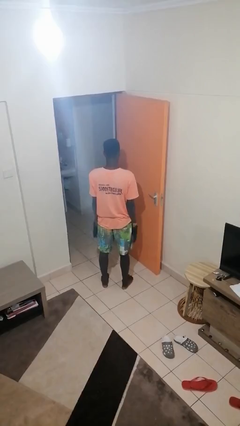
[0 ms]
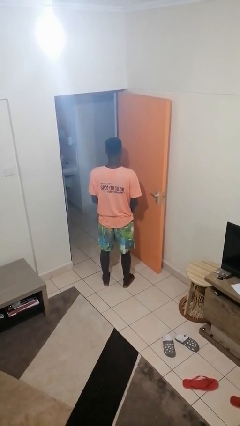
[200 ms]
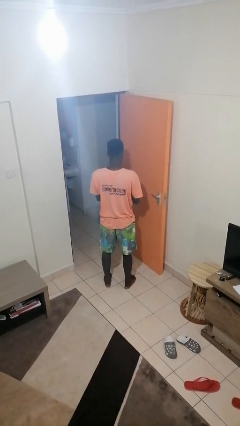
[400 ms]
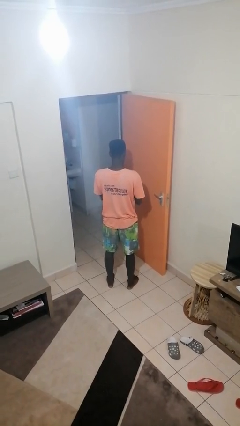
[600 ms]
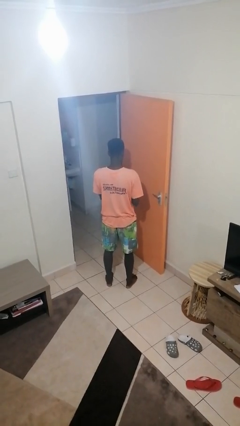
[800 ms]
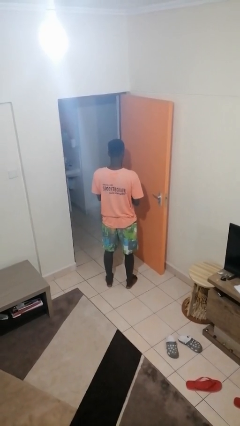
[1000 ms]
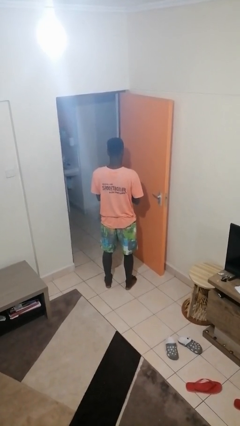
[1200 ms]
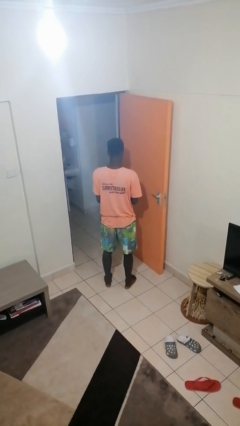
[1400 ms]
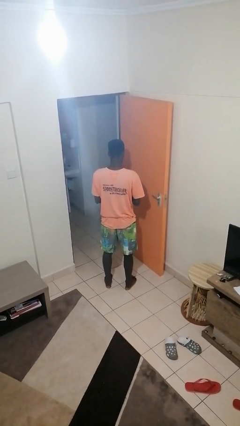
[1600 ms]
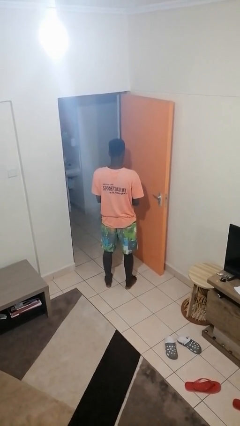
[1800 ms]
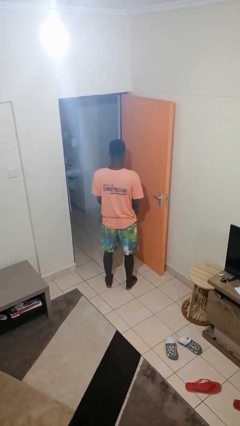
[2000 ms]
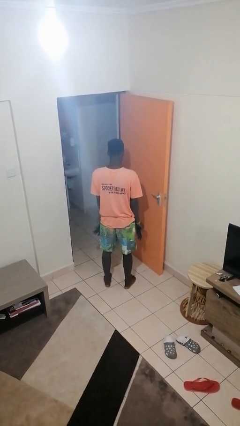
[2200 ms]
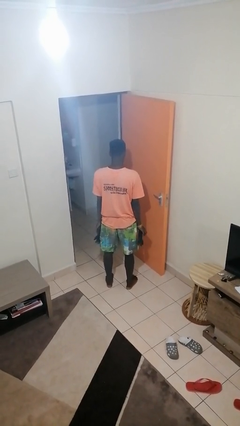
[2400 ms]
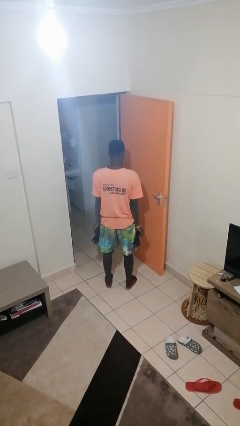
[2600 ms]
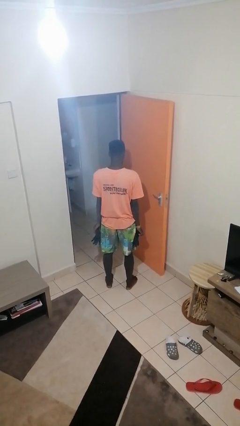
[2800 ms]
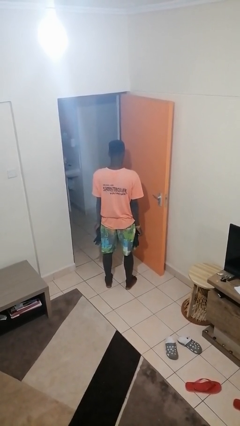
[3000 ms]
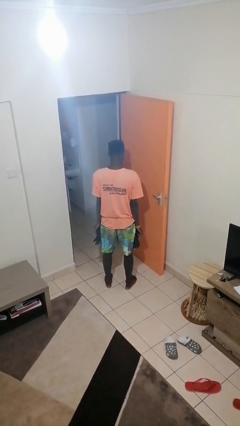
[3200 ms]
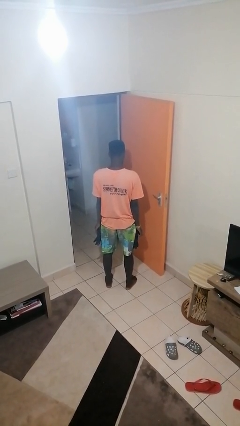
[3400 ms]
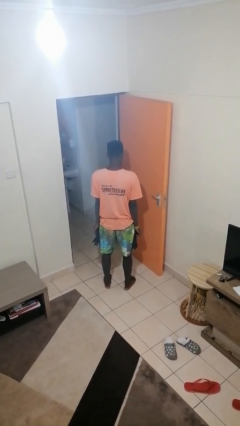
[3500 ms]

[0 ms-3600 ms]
person takes off gloves

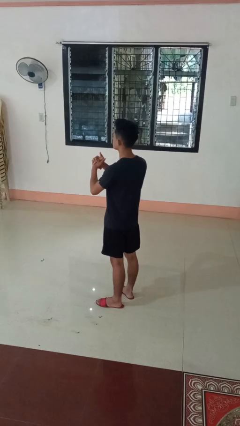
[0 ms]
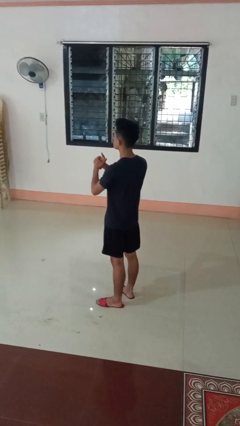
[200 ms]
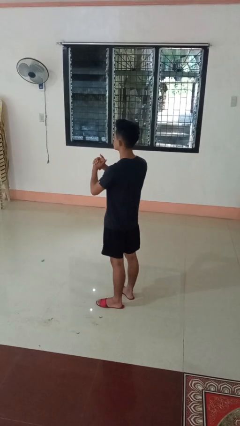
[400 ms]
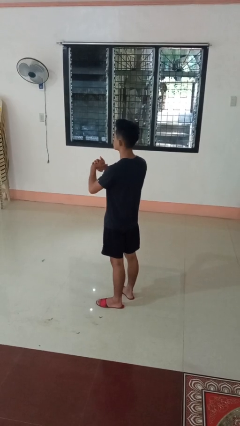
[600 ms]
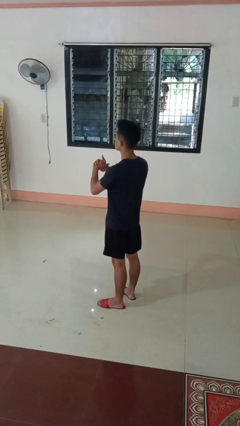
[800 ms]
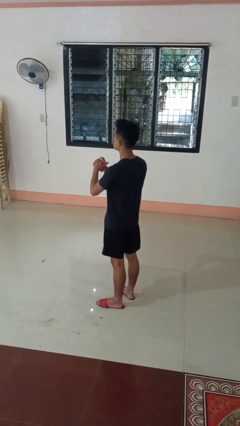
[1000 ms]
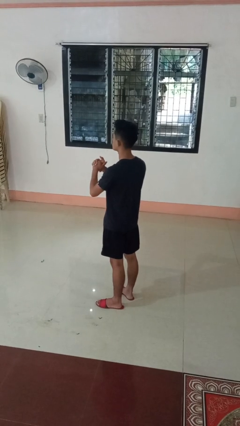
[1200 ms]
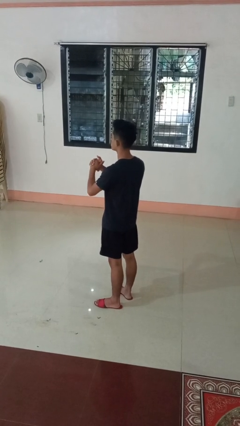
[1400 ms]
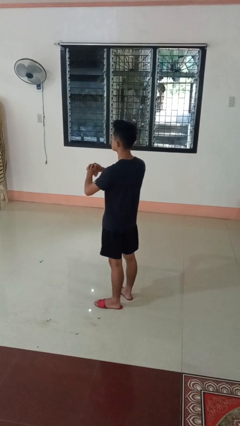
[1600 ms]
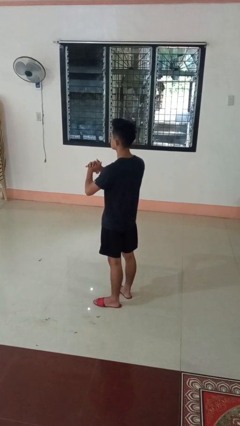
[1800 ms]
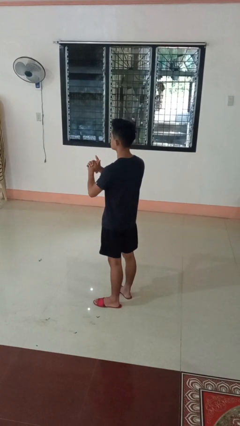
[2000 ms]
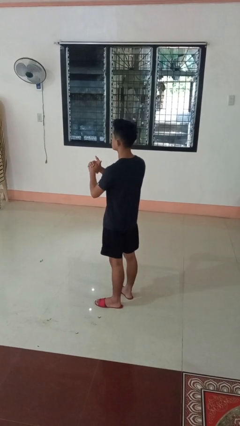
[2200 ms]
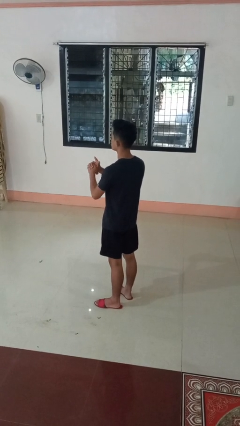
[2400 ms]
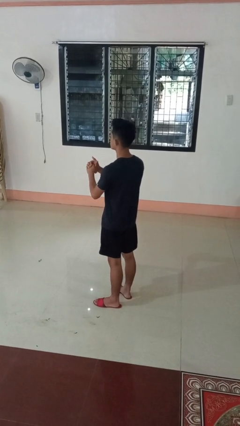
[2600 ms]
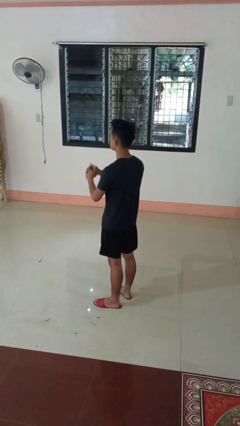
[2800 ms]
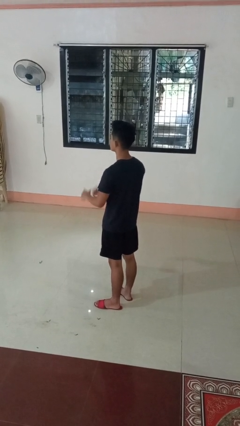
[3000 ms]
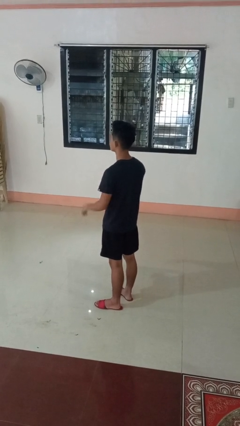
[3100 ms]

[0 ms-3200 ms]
person cracks knuckles

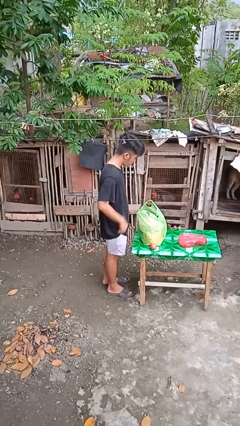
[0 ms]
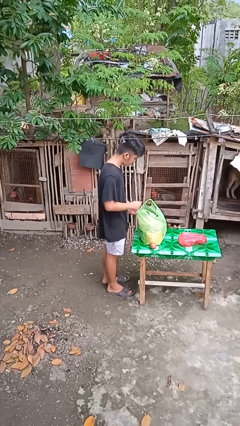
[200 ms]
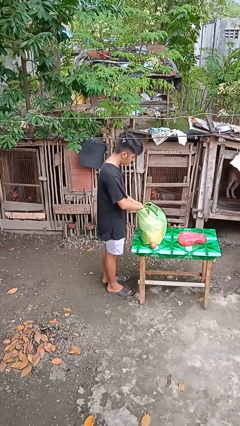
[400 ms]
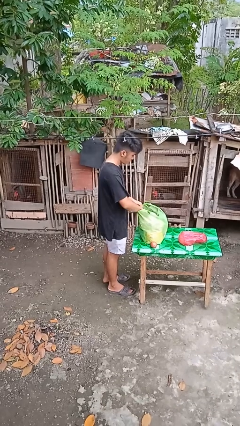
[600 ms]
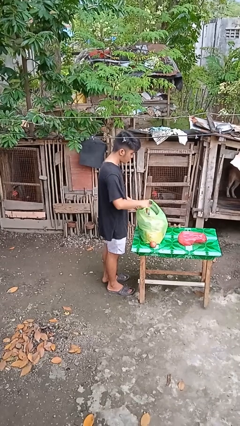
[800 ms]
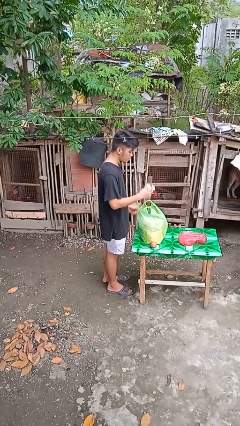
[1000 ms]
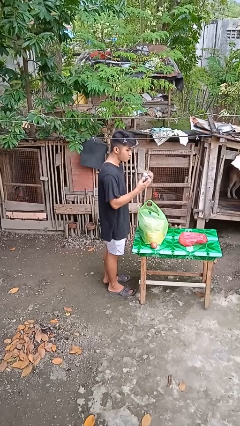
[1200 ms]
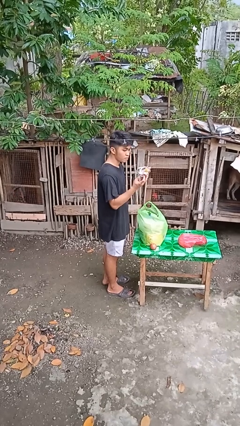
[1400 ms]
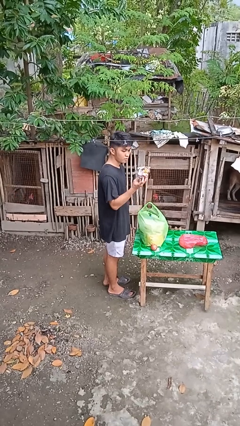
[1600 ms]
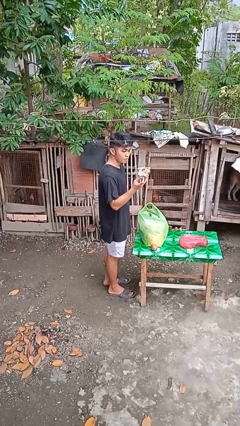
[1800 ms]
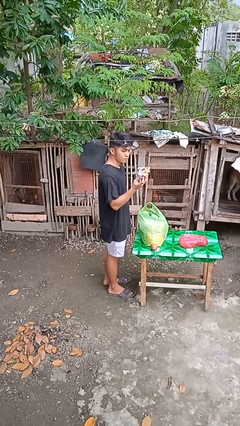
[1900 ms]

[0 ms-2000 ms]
person takes object from bag

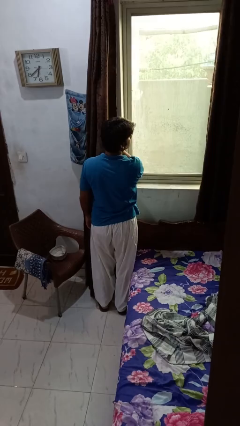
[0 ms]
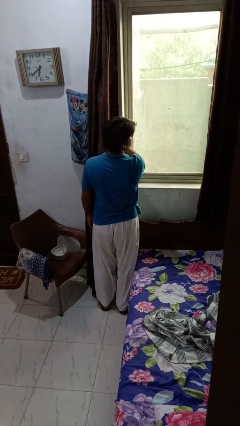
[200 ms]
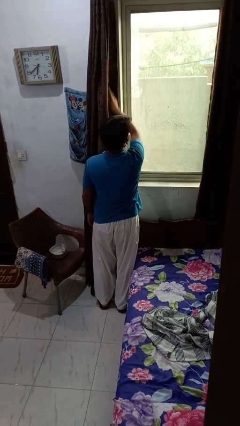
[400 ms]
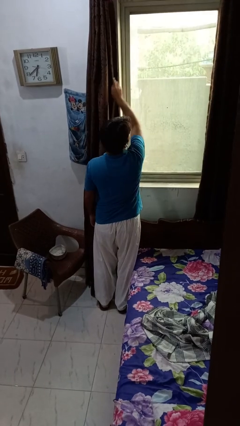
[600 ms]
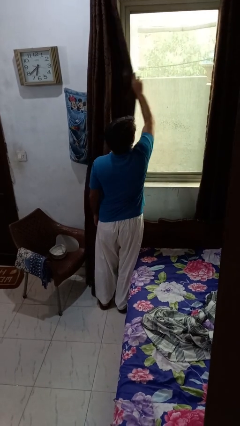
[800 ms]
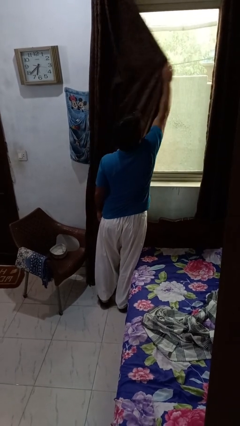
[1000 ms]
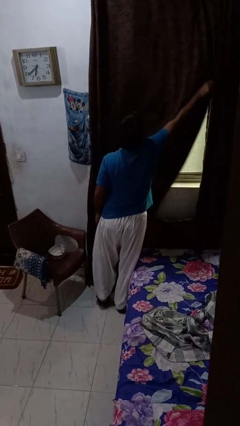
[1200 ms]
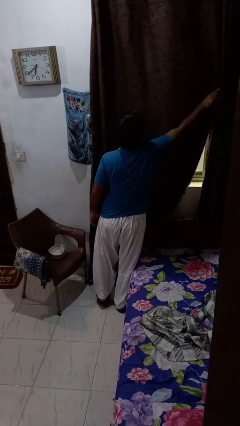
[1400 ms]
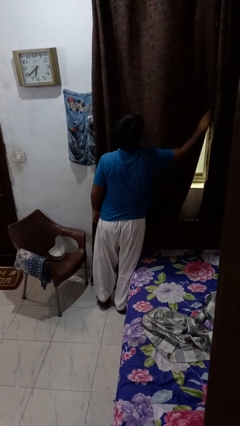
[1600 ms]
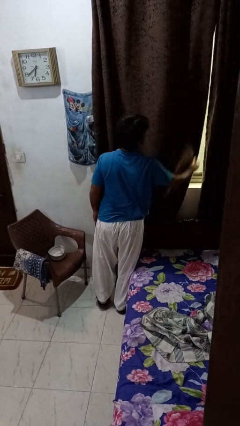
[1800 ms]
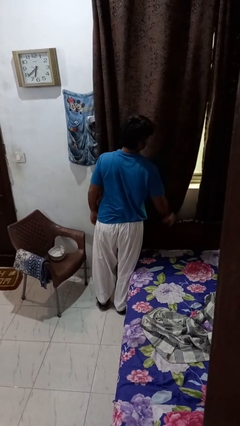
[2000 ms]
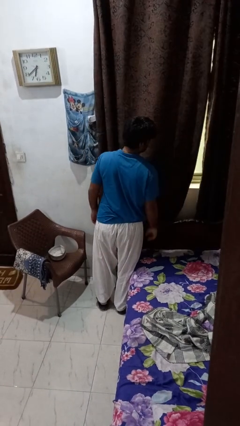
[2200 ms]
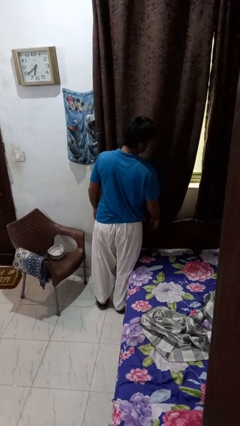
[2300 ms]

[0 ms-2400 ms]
person closes curtains

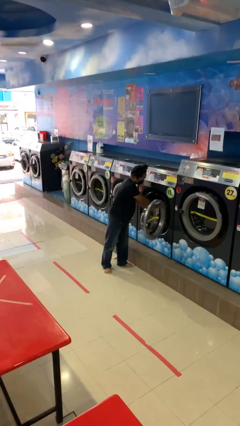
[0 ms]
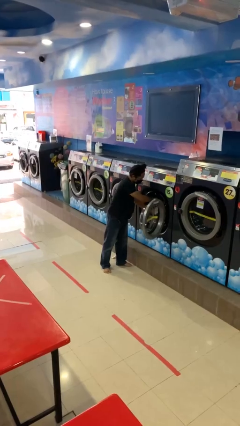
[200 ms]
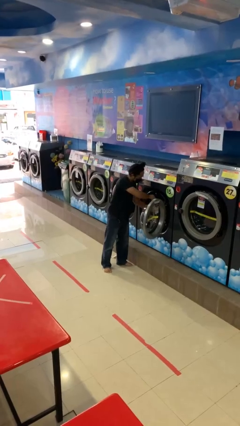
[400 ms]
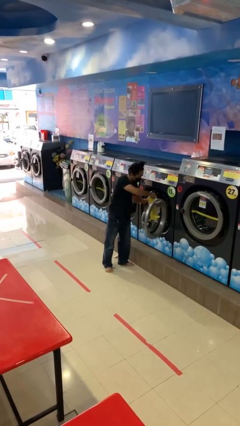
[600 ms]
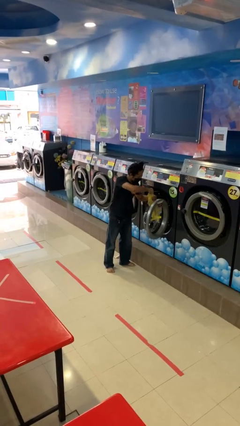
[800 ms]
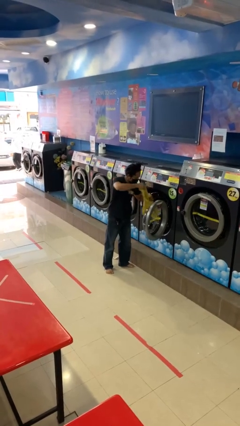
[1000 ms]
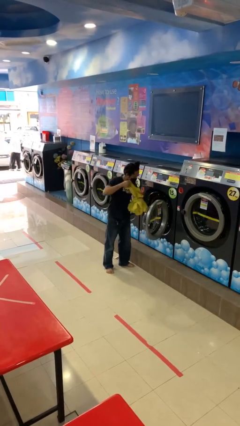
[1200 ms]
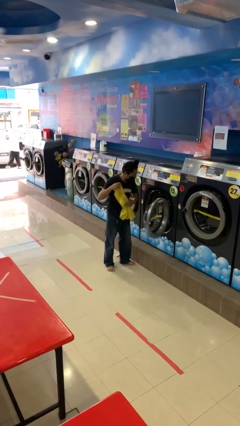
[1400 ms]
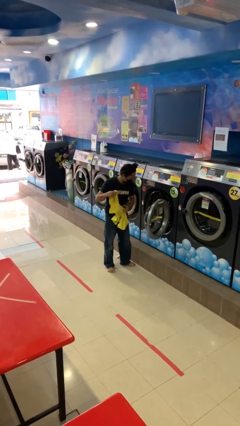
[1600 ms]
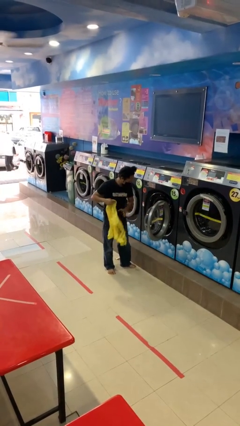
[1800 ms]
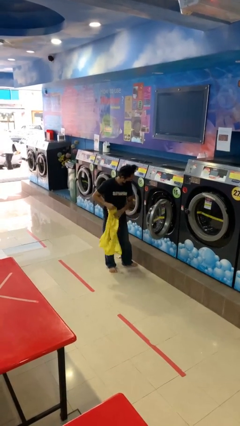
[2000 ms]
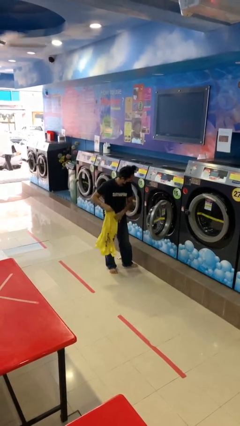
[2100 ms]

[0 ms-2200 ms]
person unloads clotheswasher

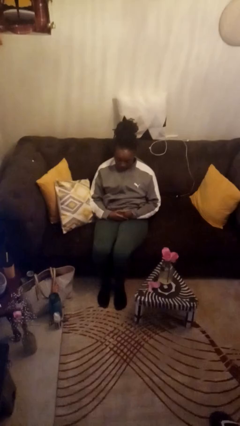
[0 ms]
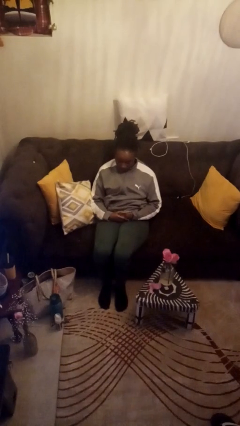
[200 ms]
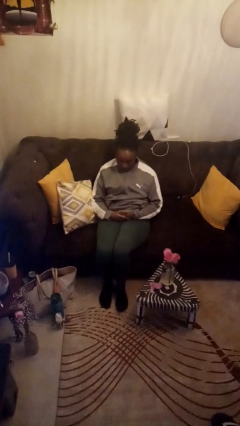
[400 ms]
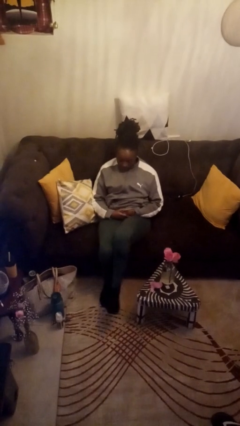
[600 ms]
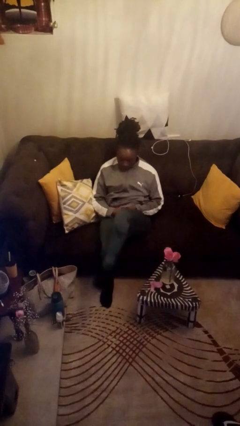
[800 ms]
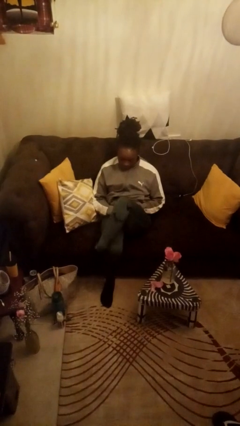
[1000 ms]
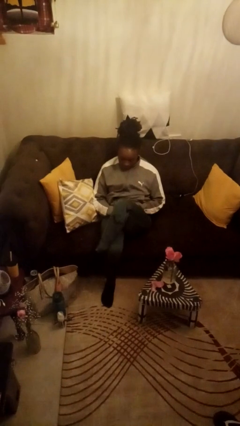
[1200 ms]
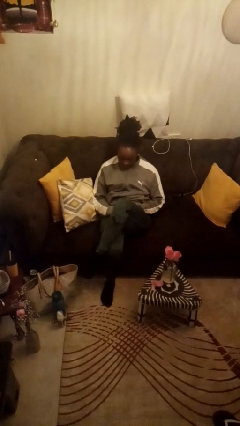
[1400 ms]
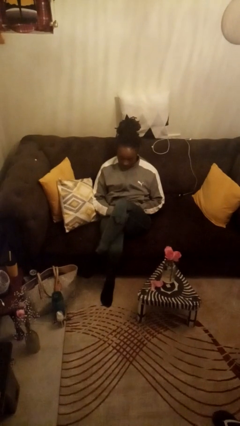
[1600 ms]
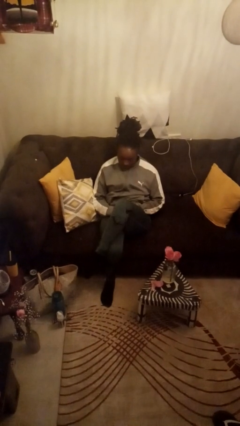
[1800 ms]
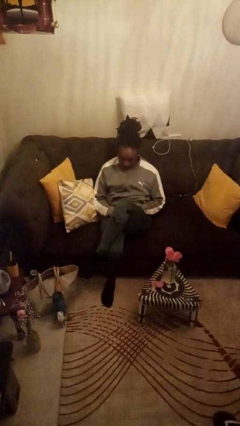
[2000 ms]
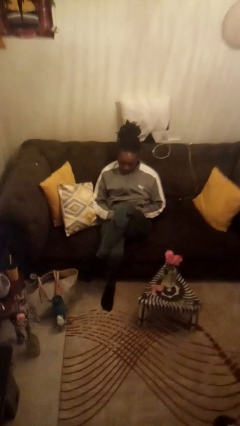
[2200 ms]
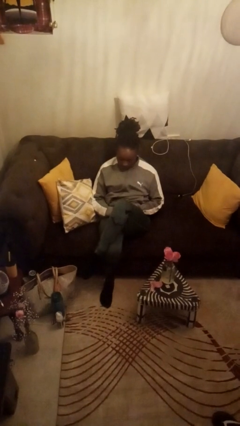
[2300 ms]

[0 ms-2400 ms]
person crosses legs

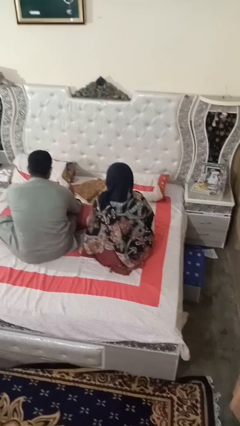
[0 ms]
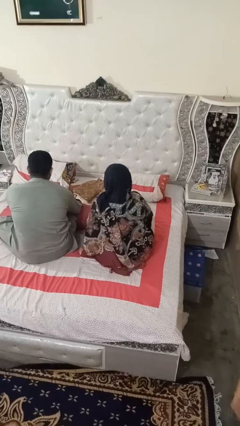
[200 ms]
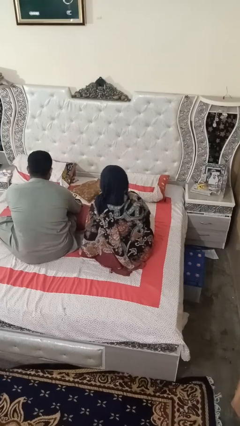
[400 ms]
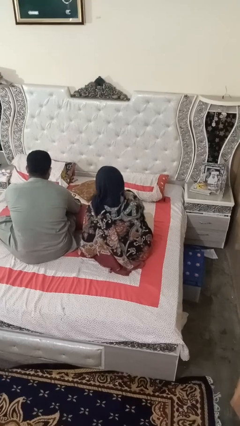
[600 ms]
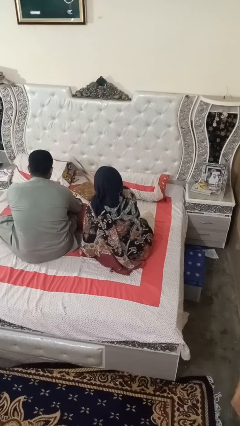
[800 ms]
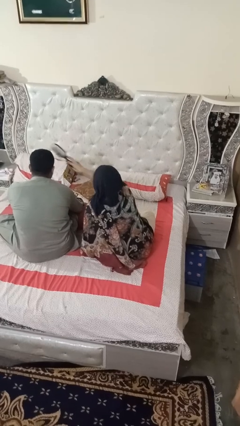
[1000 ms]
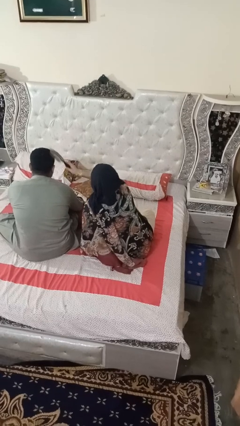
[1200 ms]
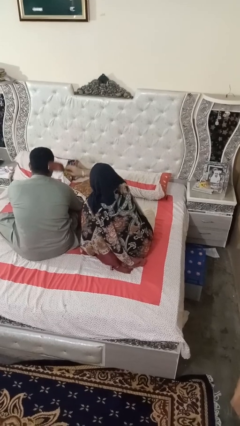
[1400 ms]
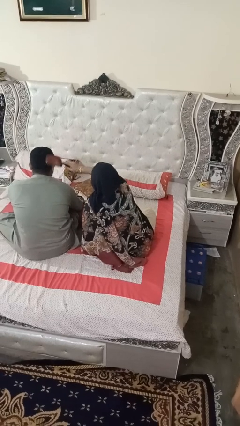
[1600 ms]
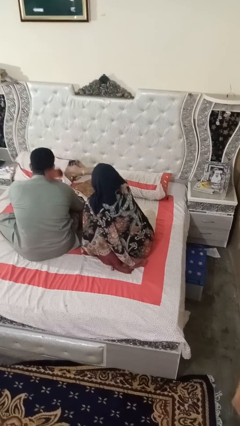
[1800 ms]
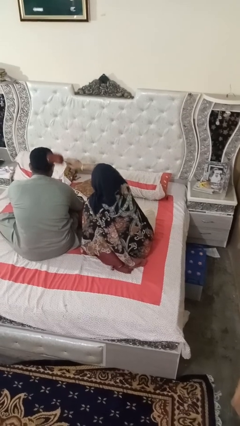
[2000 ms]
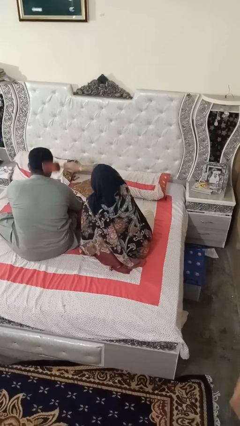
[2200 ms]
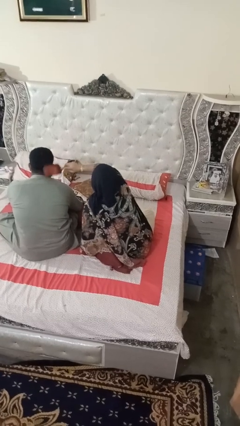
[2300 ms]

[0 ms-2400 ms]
person brushes hair of person
